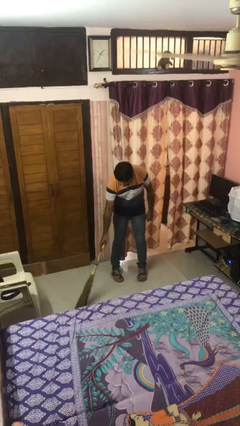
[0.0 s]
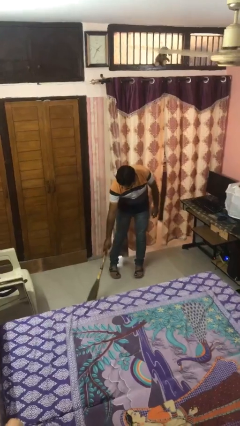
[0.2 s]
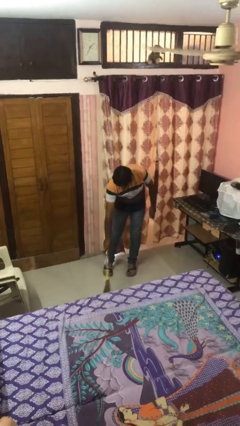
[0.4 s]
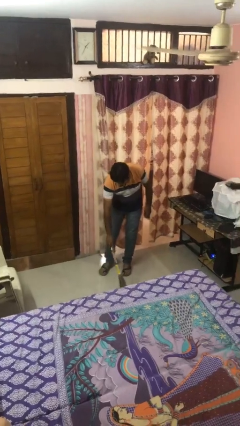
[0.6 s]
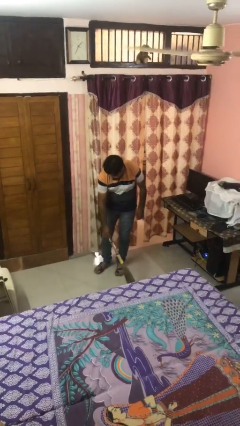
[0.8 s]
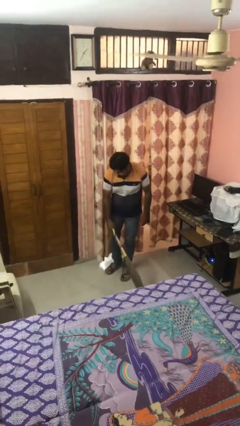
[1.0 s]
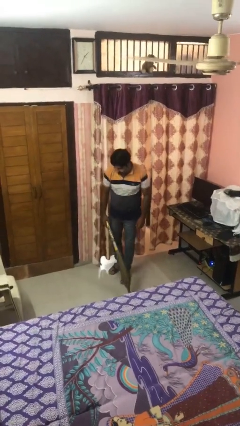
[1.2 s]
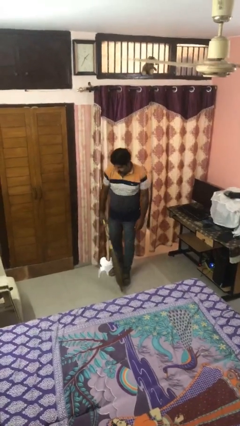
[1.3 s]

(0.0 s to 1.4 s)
person sweeps floor

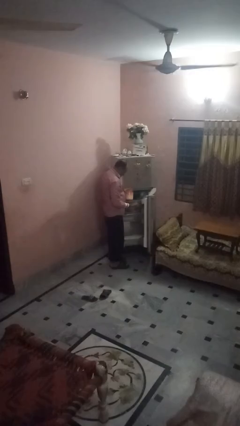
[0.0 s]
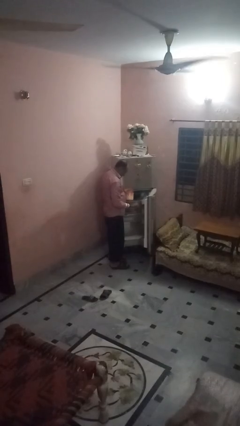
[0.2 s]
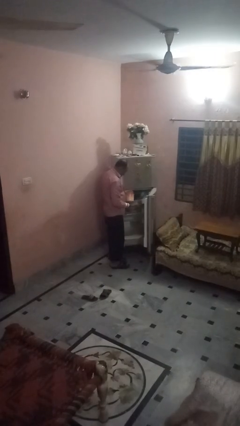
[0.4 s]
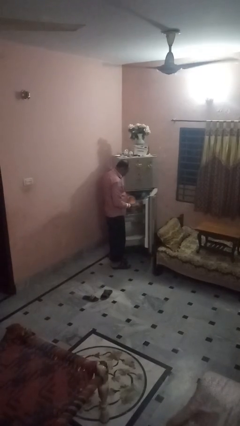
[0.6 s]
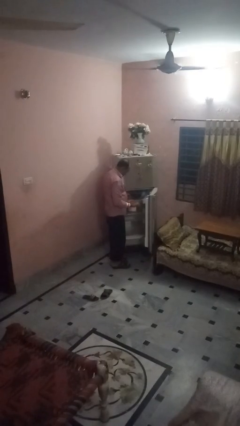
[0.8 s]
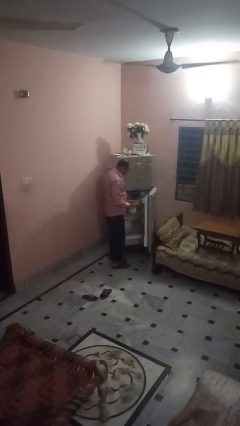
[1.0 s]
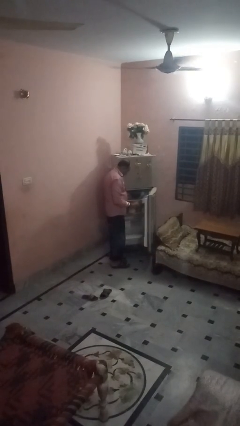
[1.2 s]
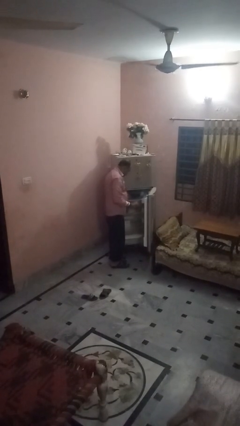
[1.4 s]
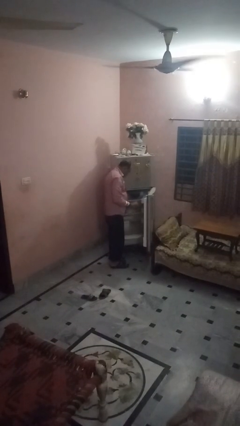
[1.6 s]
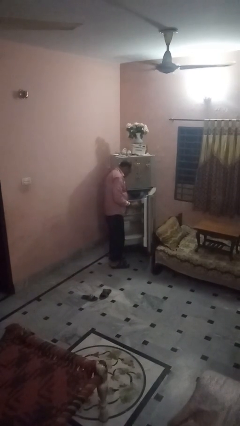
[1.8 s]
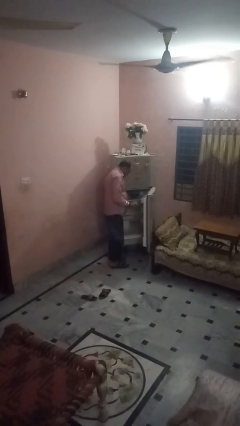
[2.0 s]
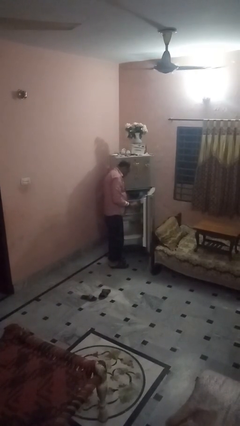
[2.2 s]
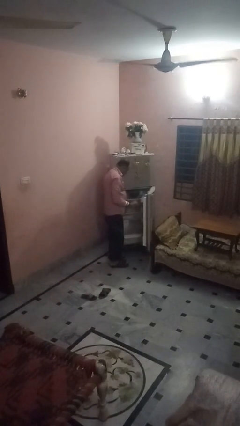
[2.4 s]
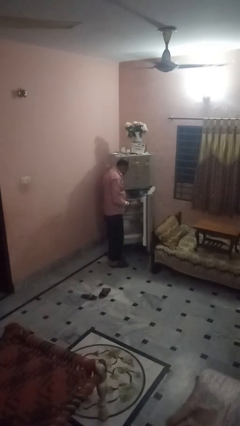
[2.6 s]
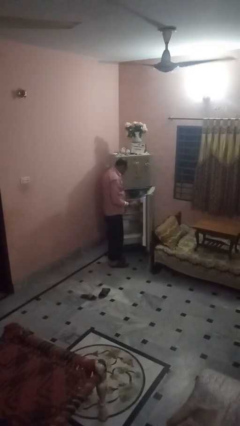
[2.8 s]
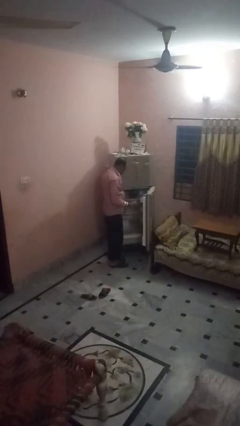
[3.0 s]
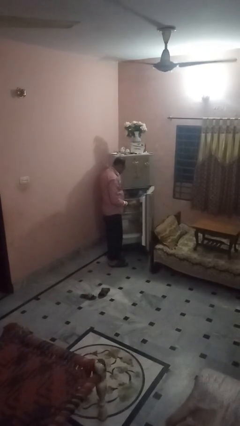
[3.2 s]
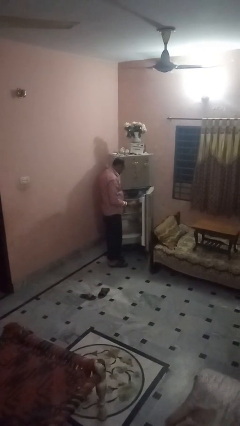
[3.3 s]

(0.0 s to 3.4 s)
person takes object from refrigerator

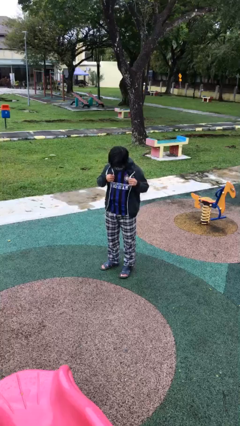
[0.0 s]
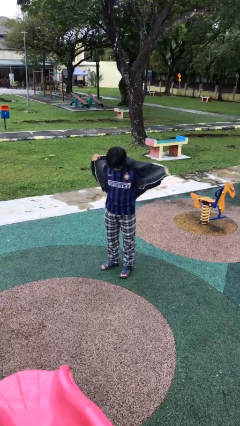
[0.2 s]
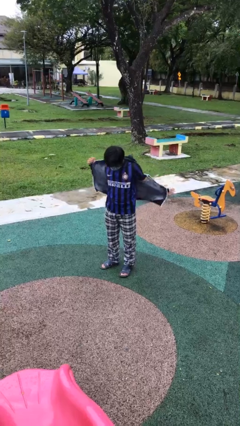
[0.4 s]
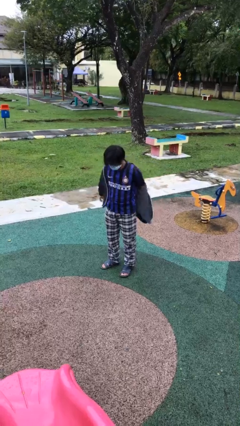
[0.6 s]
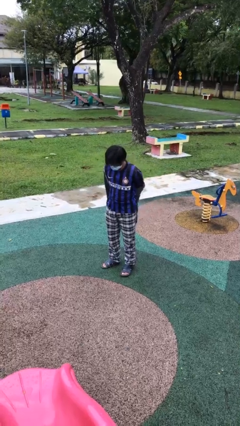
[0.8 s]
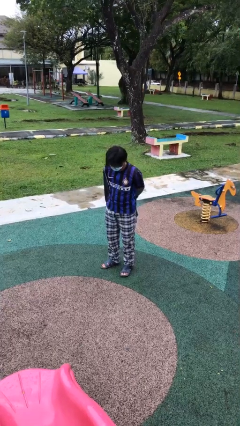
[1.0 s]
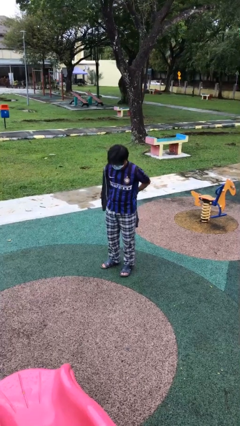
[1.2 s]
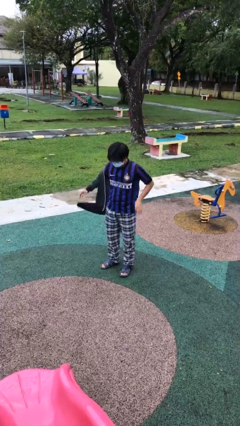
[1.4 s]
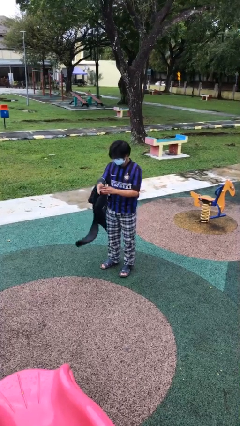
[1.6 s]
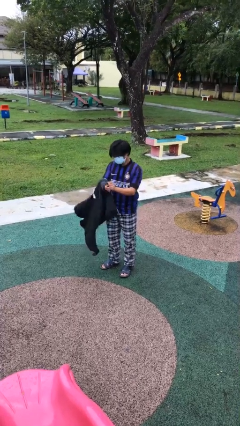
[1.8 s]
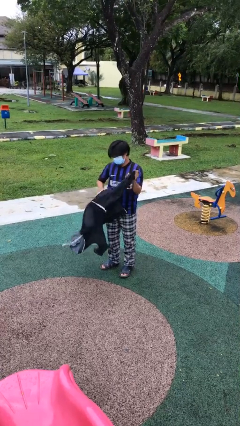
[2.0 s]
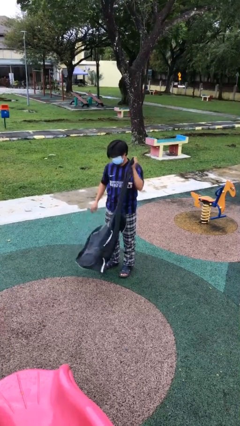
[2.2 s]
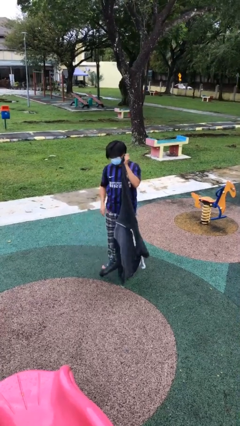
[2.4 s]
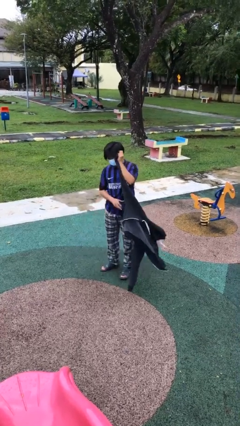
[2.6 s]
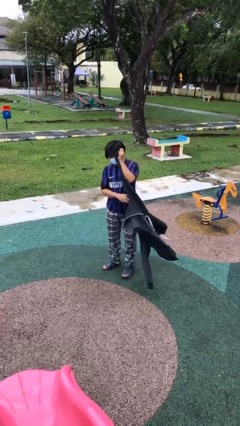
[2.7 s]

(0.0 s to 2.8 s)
person takes off jacket

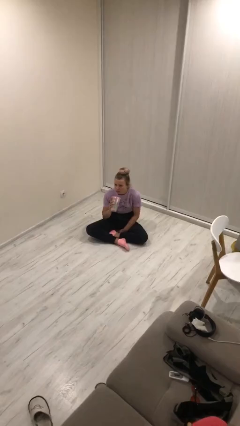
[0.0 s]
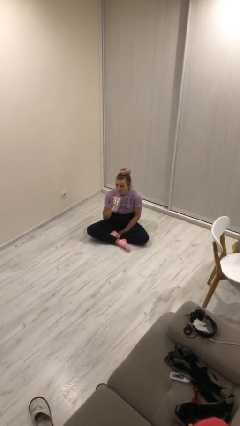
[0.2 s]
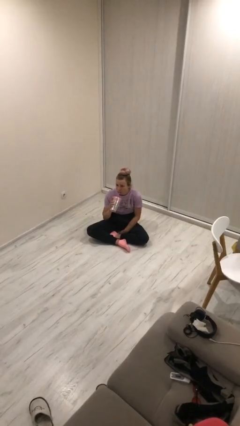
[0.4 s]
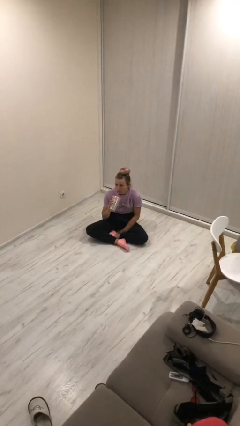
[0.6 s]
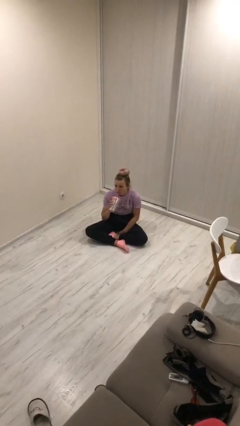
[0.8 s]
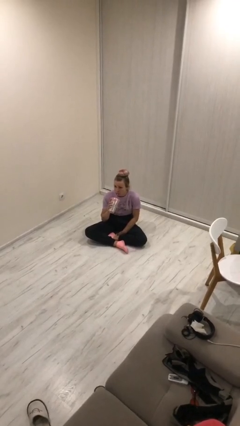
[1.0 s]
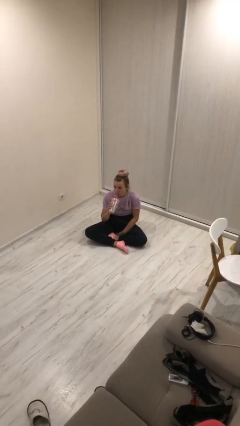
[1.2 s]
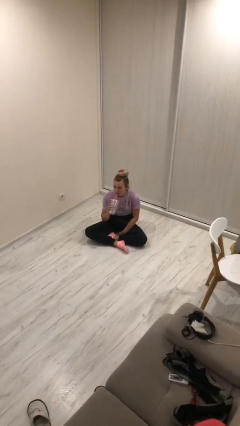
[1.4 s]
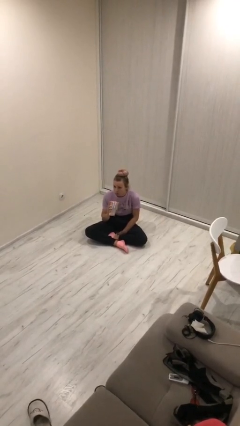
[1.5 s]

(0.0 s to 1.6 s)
person drinks from straw

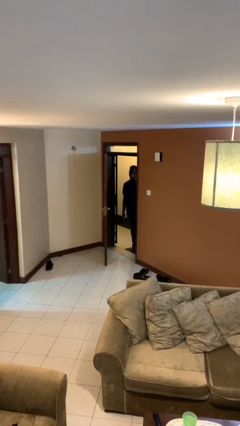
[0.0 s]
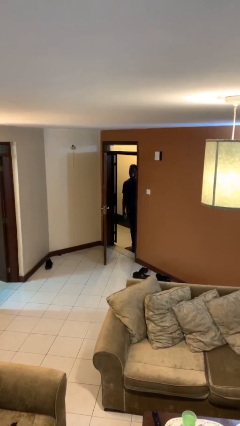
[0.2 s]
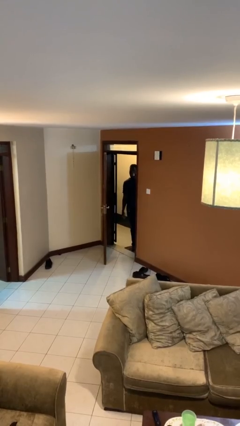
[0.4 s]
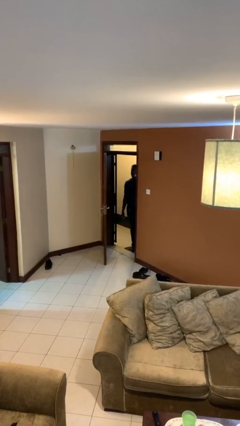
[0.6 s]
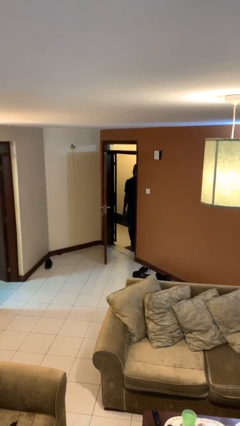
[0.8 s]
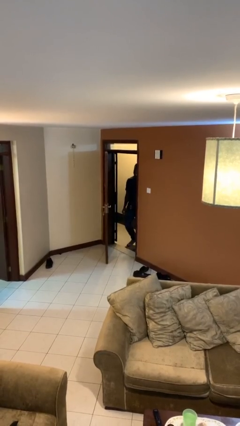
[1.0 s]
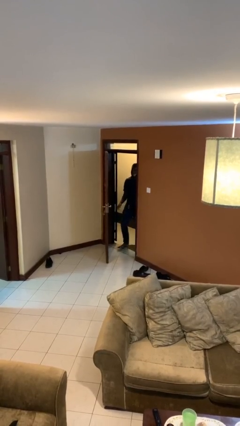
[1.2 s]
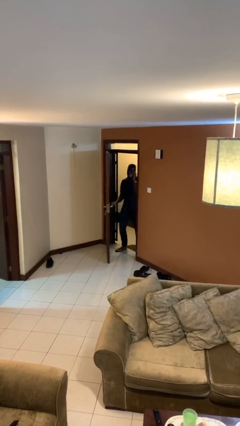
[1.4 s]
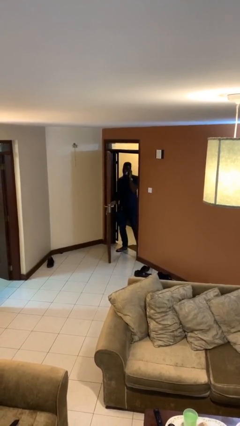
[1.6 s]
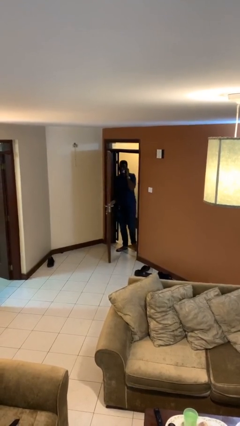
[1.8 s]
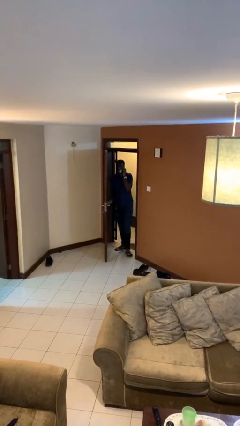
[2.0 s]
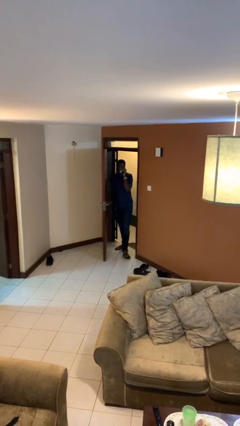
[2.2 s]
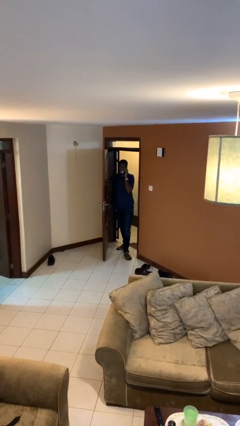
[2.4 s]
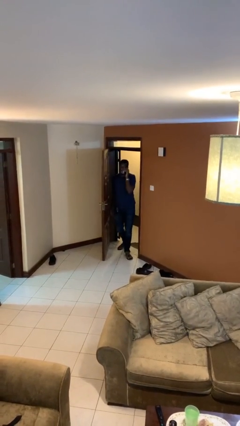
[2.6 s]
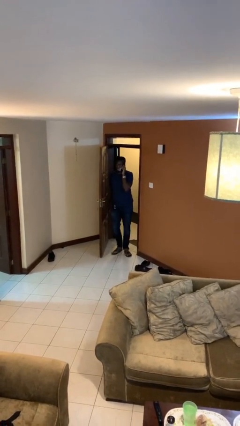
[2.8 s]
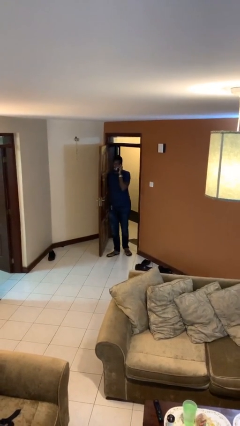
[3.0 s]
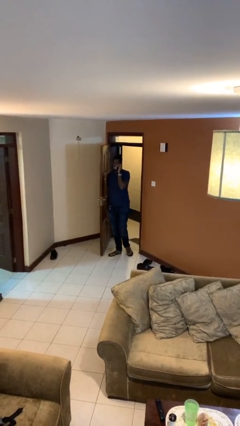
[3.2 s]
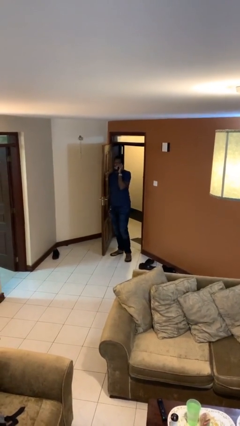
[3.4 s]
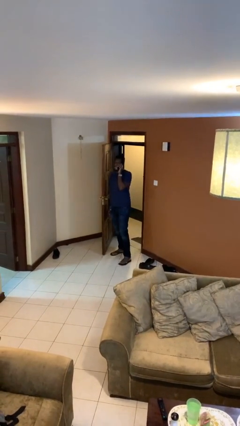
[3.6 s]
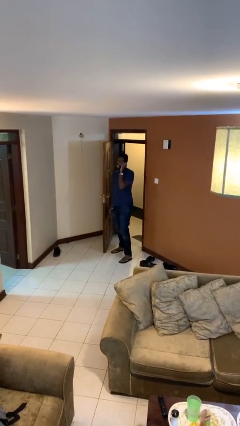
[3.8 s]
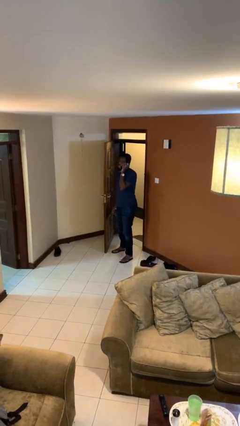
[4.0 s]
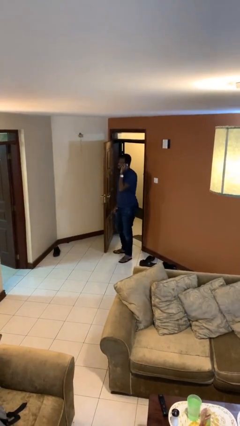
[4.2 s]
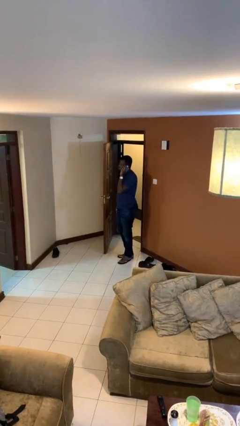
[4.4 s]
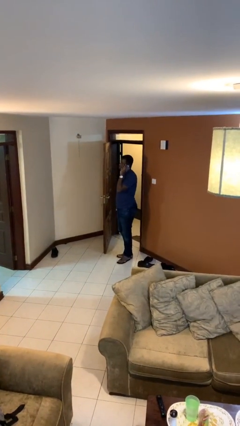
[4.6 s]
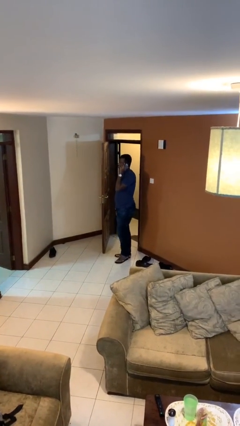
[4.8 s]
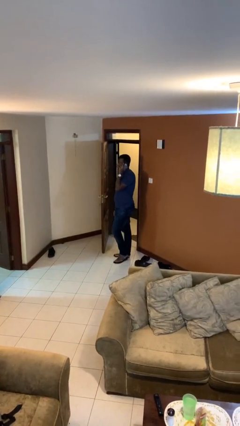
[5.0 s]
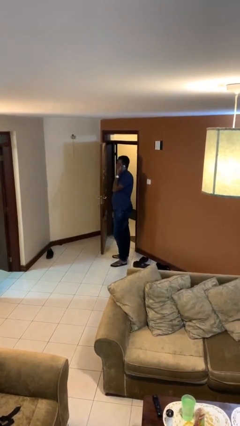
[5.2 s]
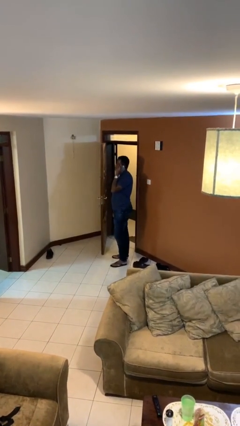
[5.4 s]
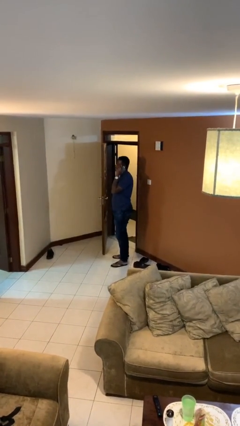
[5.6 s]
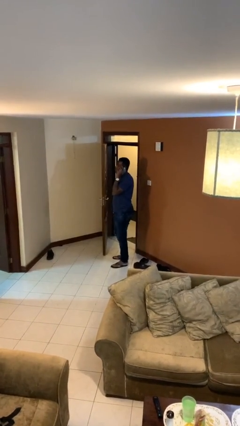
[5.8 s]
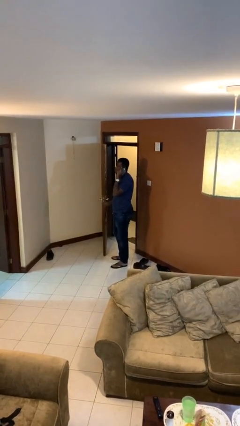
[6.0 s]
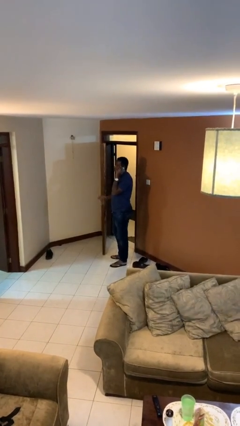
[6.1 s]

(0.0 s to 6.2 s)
person enters scene through structure

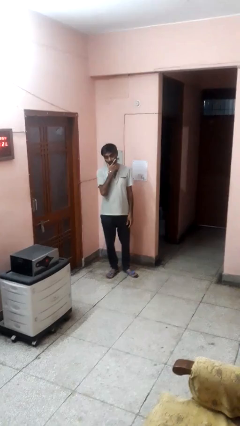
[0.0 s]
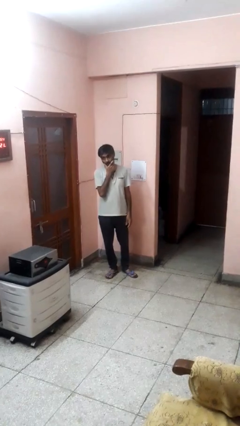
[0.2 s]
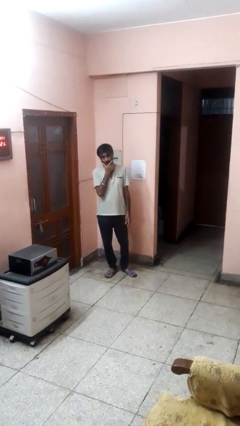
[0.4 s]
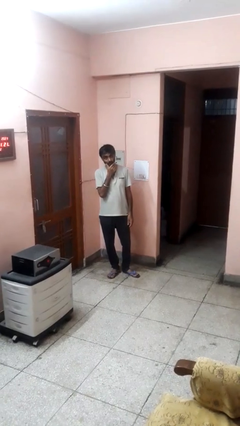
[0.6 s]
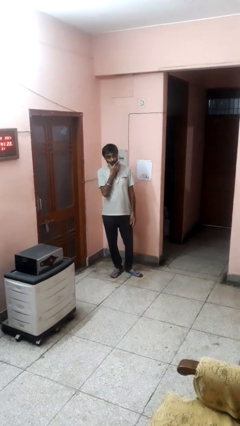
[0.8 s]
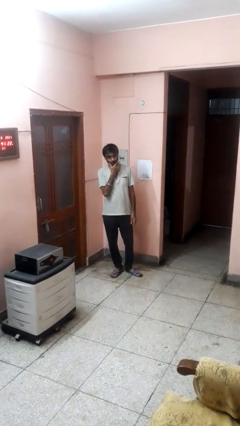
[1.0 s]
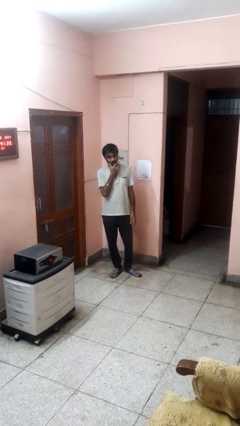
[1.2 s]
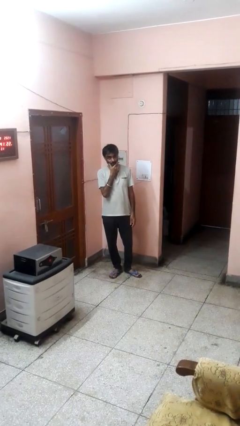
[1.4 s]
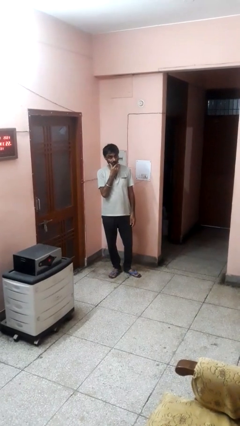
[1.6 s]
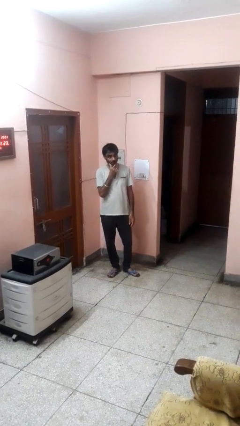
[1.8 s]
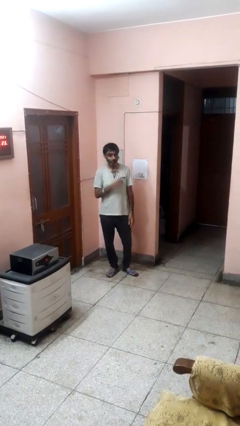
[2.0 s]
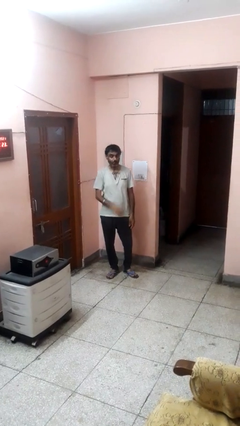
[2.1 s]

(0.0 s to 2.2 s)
person strokes chin

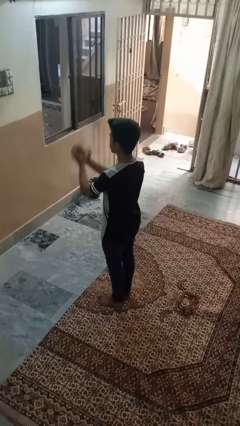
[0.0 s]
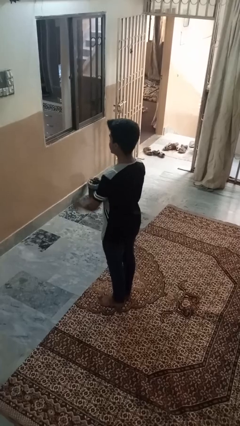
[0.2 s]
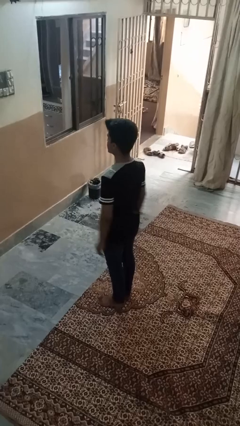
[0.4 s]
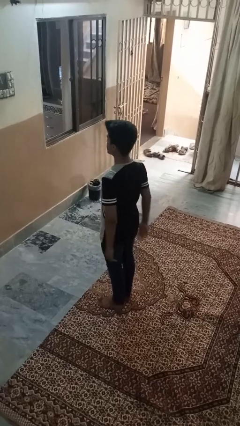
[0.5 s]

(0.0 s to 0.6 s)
person prays
